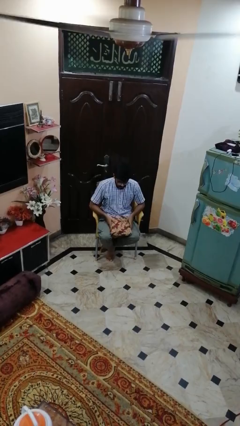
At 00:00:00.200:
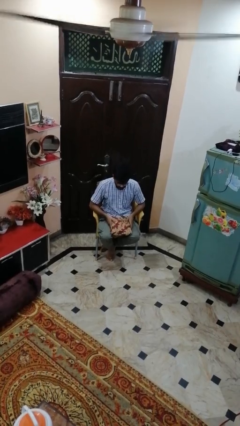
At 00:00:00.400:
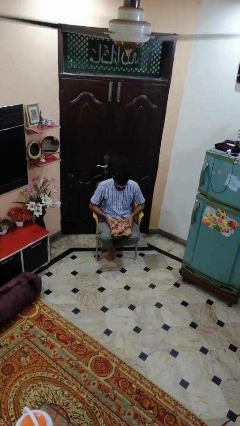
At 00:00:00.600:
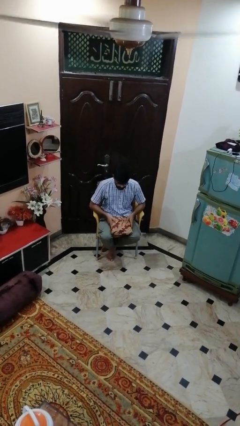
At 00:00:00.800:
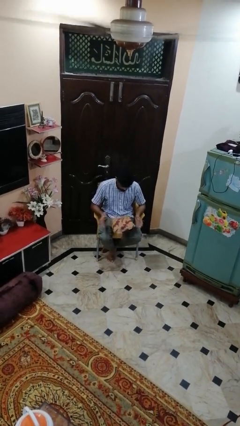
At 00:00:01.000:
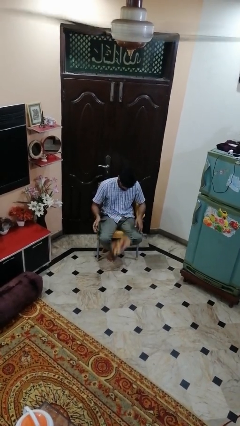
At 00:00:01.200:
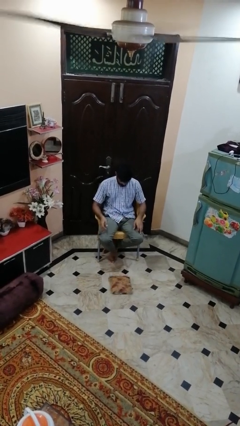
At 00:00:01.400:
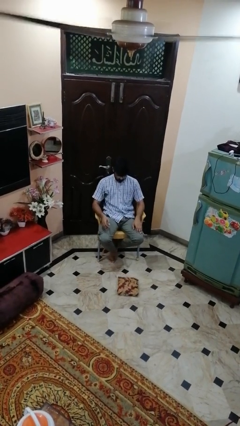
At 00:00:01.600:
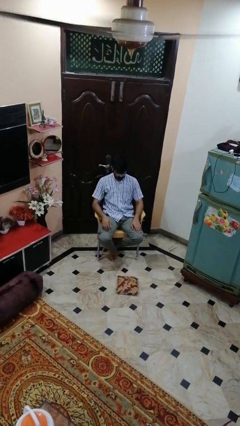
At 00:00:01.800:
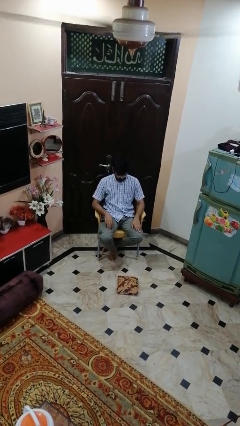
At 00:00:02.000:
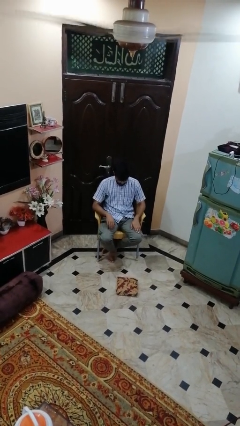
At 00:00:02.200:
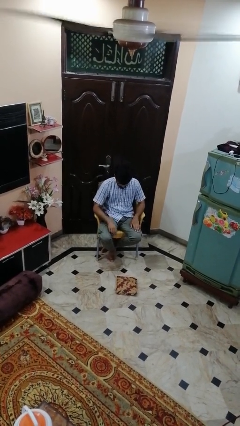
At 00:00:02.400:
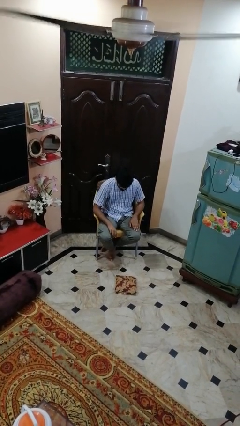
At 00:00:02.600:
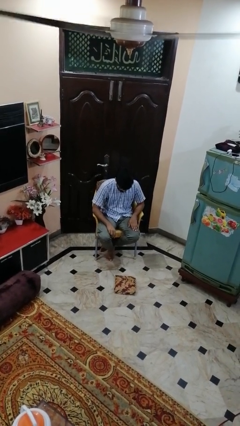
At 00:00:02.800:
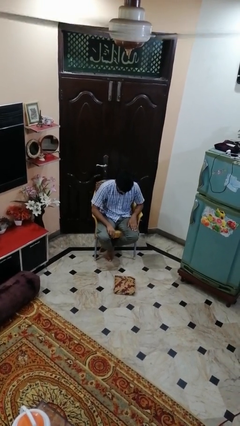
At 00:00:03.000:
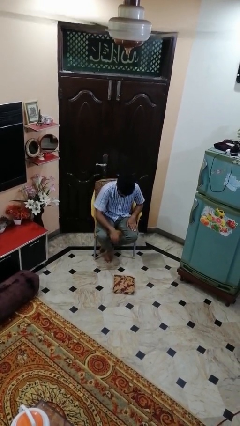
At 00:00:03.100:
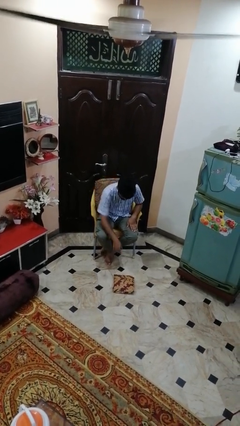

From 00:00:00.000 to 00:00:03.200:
person drops object

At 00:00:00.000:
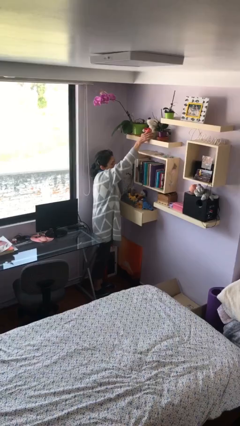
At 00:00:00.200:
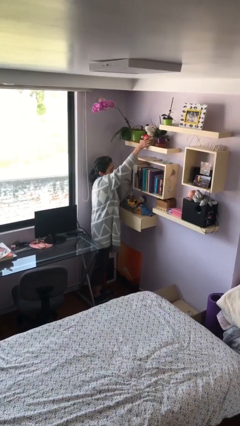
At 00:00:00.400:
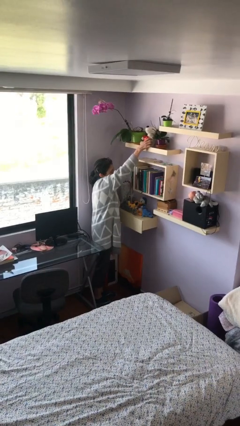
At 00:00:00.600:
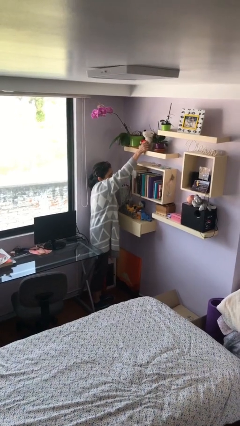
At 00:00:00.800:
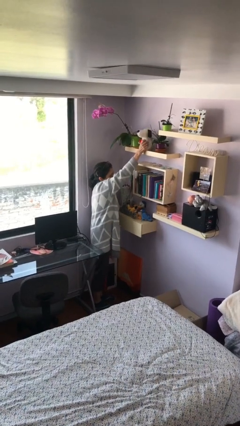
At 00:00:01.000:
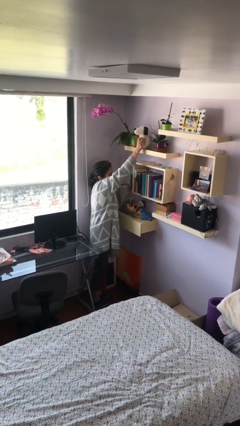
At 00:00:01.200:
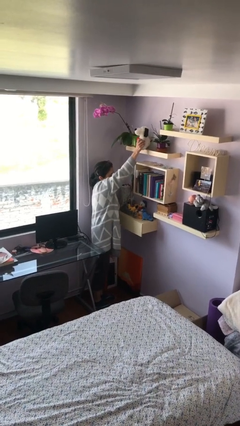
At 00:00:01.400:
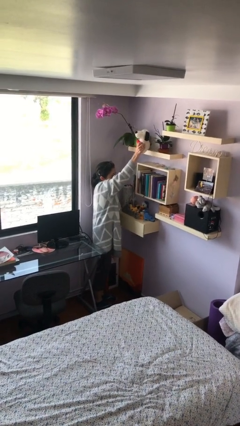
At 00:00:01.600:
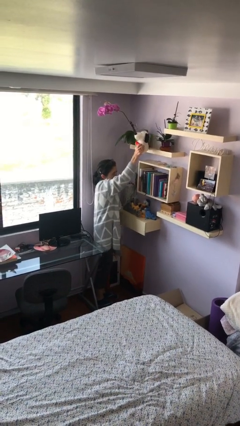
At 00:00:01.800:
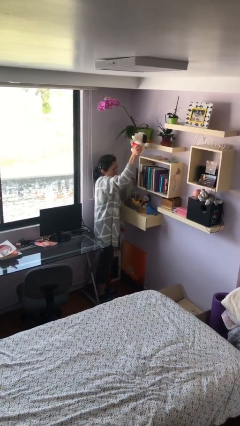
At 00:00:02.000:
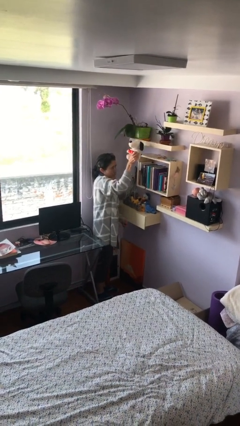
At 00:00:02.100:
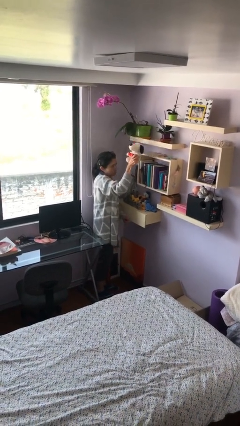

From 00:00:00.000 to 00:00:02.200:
person picks up object from shelf

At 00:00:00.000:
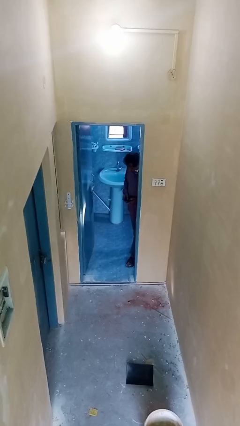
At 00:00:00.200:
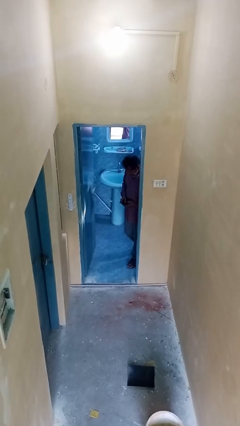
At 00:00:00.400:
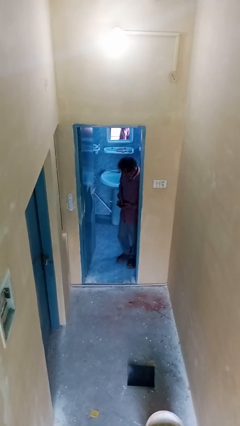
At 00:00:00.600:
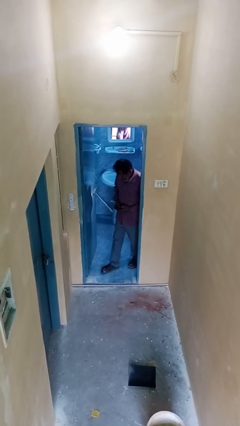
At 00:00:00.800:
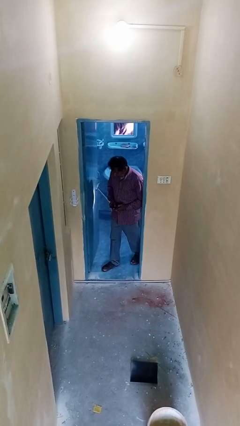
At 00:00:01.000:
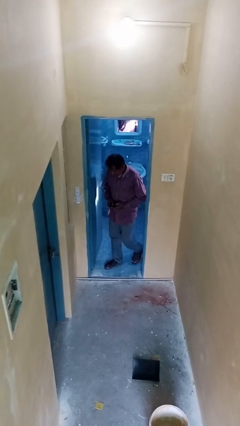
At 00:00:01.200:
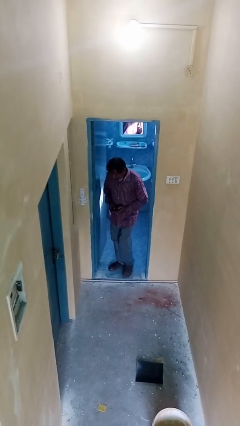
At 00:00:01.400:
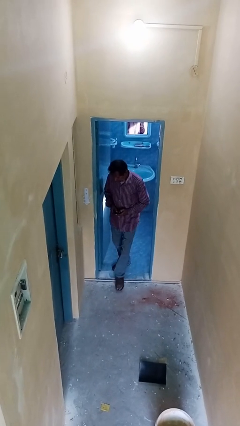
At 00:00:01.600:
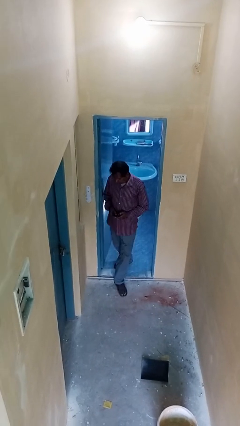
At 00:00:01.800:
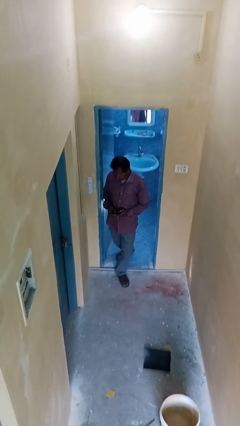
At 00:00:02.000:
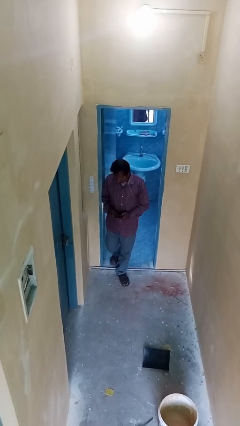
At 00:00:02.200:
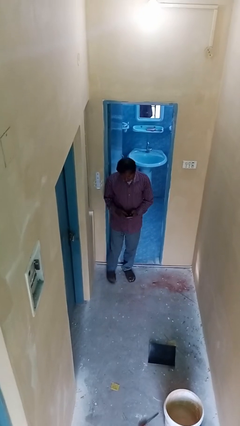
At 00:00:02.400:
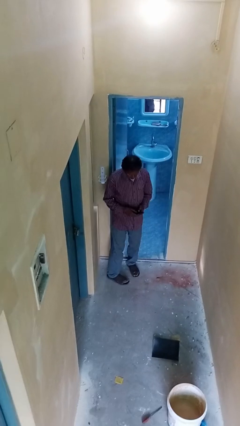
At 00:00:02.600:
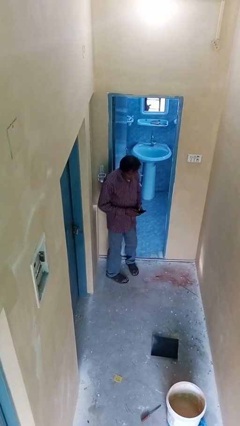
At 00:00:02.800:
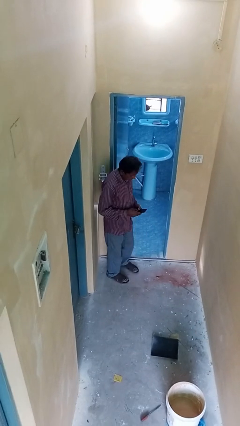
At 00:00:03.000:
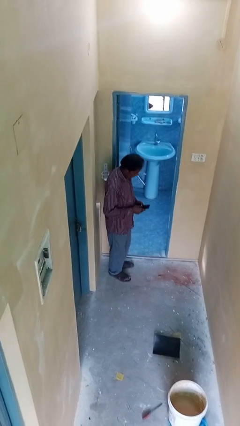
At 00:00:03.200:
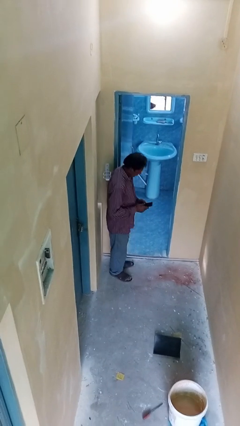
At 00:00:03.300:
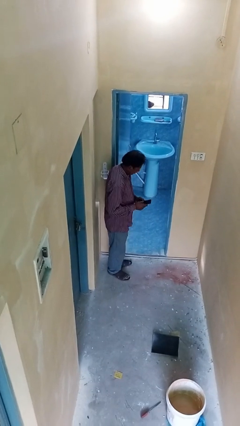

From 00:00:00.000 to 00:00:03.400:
person enters scene through structure

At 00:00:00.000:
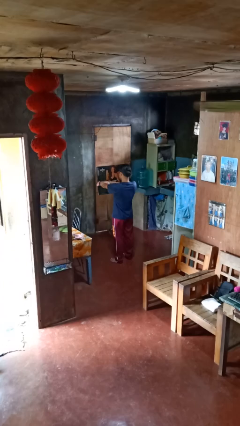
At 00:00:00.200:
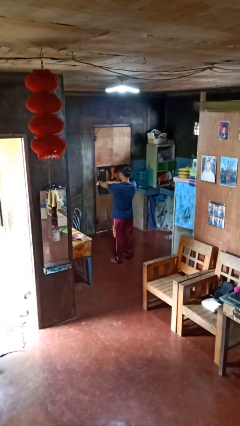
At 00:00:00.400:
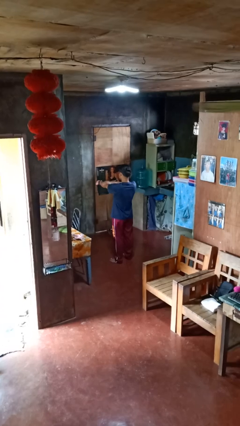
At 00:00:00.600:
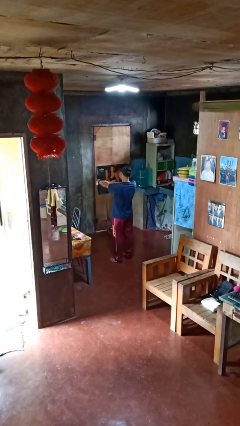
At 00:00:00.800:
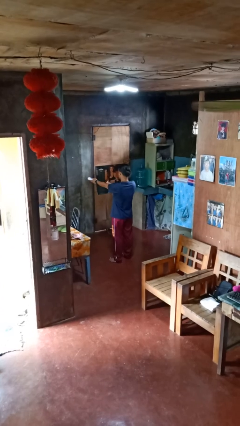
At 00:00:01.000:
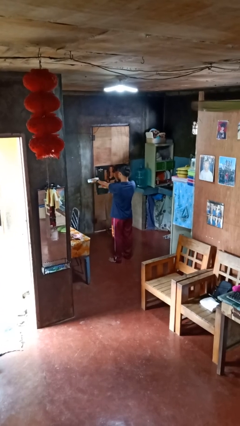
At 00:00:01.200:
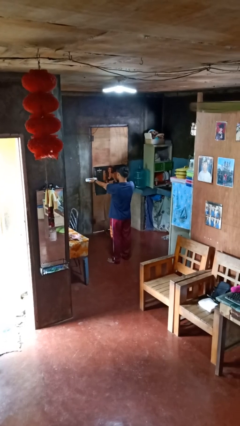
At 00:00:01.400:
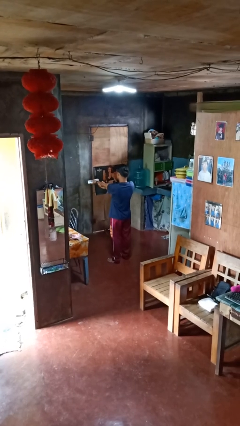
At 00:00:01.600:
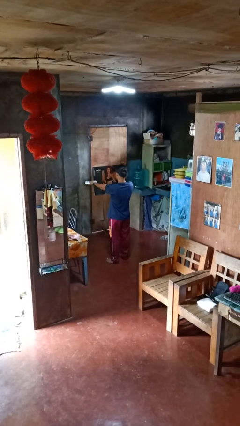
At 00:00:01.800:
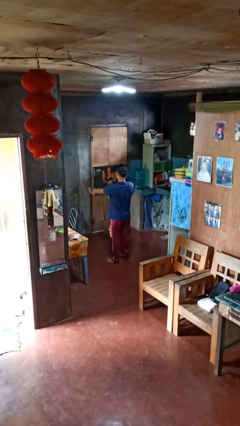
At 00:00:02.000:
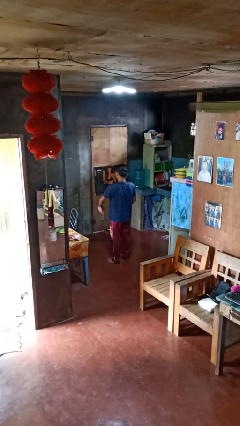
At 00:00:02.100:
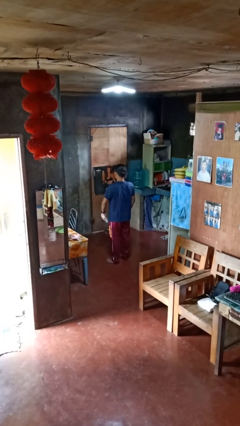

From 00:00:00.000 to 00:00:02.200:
person applies sunscreen

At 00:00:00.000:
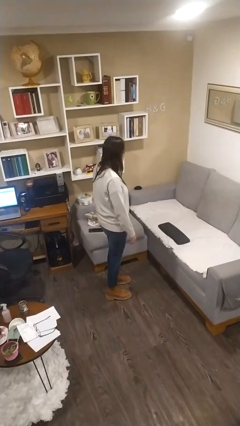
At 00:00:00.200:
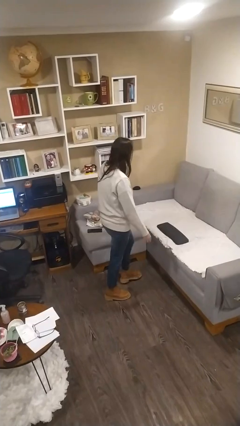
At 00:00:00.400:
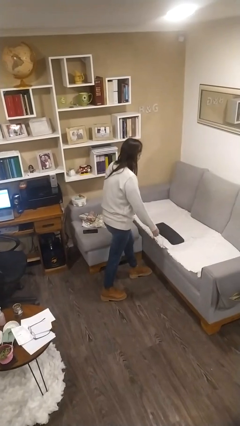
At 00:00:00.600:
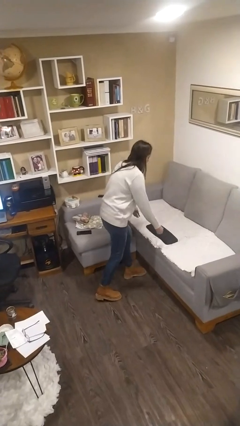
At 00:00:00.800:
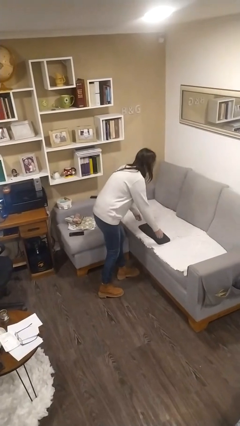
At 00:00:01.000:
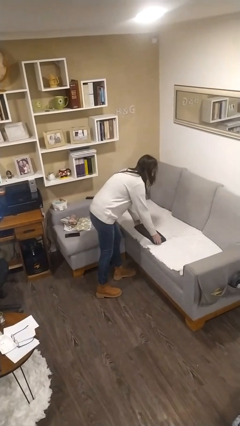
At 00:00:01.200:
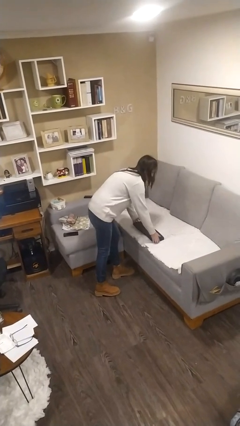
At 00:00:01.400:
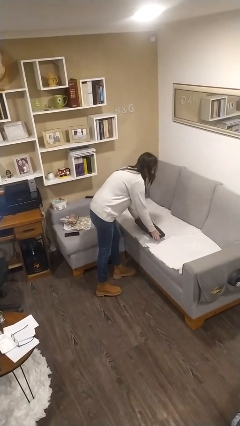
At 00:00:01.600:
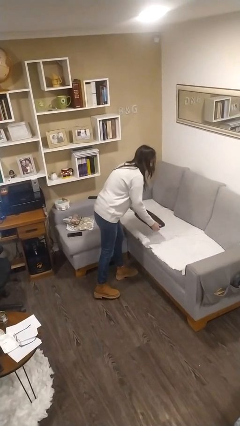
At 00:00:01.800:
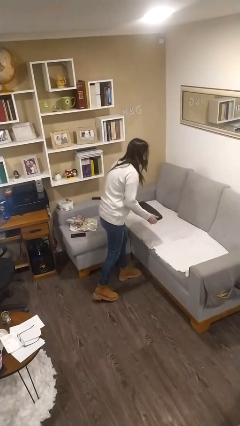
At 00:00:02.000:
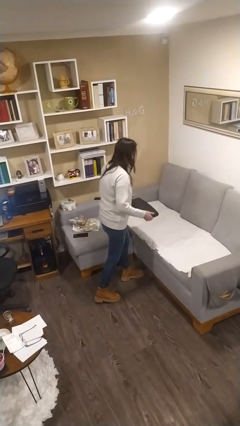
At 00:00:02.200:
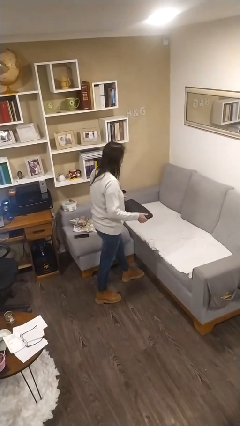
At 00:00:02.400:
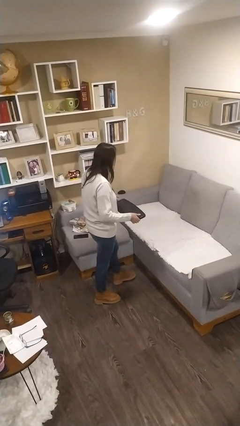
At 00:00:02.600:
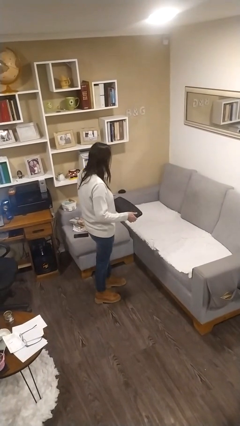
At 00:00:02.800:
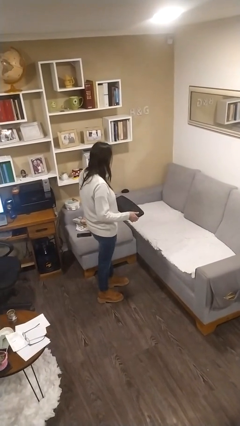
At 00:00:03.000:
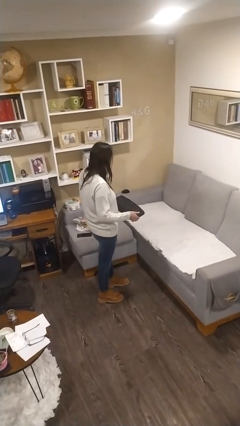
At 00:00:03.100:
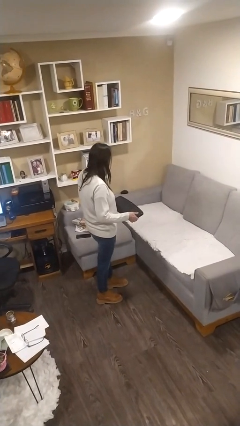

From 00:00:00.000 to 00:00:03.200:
person picks up object from couch

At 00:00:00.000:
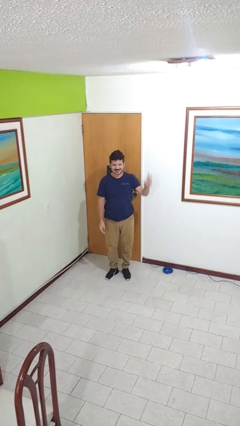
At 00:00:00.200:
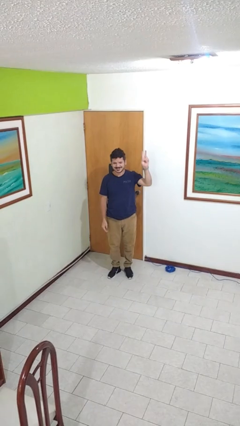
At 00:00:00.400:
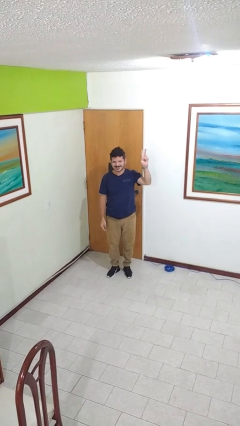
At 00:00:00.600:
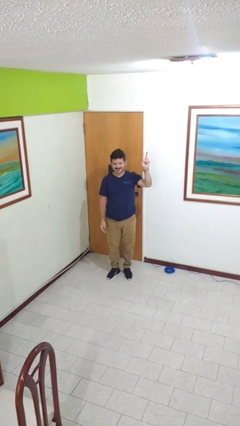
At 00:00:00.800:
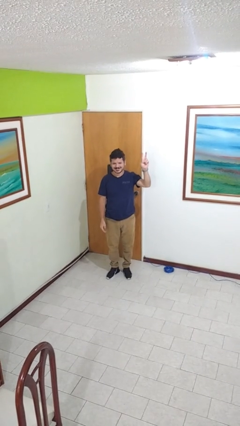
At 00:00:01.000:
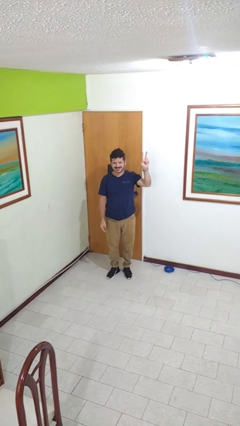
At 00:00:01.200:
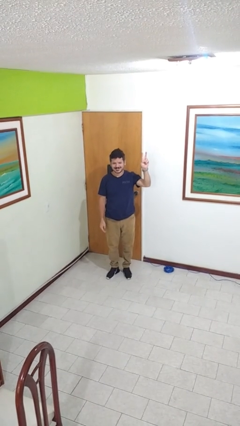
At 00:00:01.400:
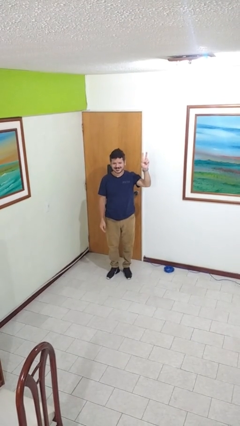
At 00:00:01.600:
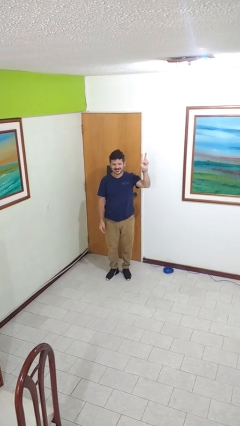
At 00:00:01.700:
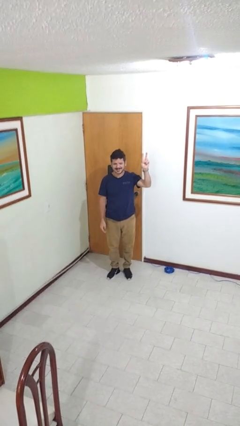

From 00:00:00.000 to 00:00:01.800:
person gestures peace

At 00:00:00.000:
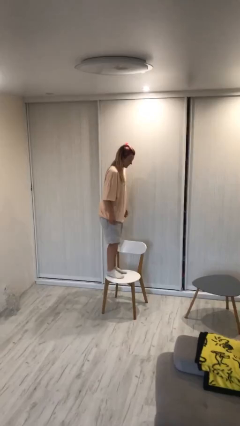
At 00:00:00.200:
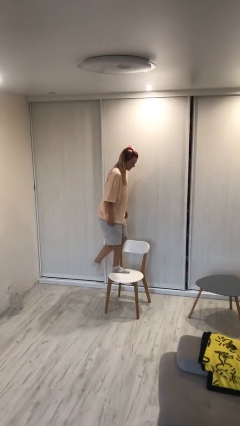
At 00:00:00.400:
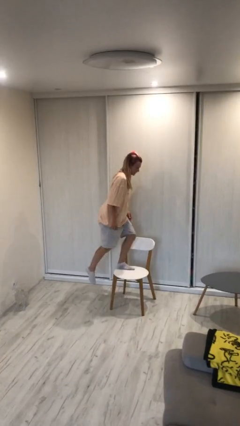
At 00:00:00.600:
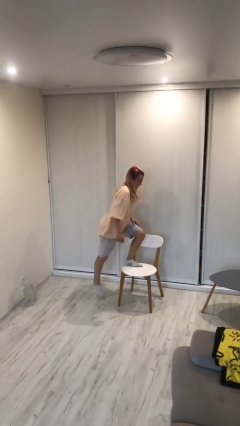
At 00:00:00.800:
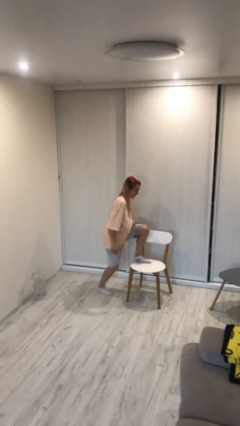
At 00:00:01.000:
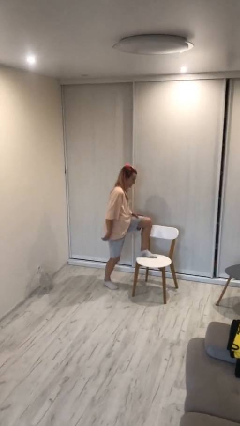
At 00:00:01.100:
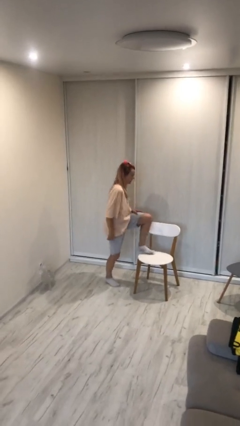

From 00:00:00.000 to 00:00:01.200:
person climbs off chair
